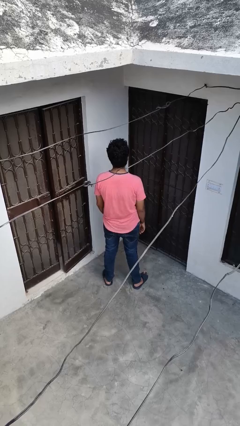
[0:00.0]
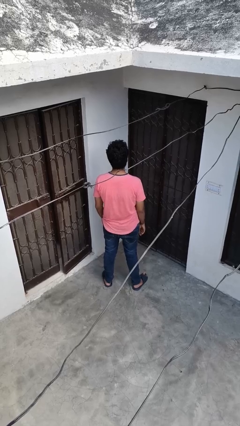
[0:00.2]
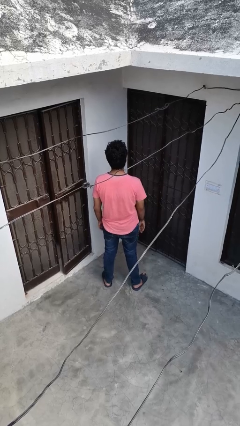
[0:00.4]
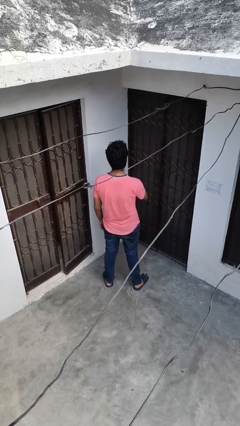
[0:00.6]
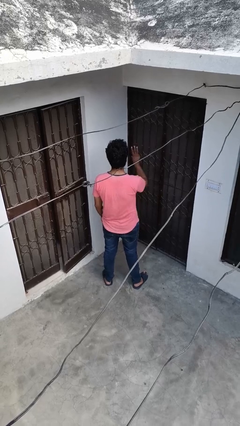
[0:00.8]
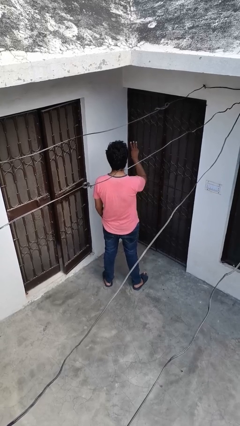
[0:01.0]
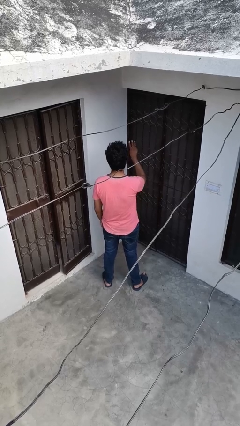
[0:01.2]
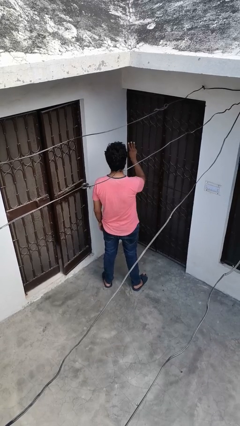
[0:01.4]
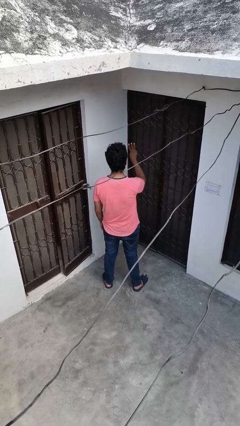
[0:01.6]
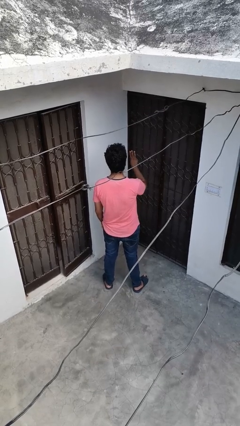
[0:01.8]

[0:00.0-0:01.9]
person gestures number three

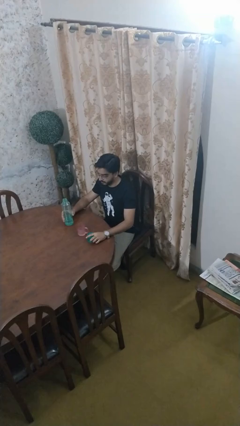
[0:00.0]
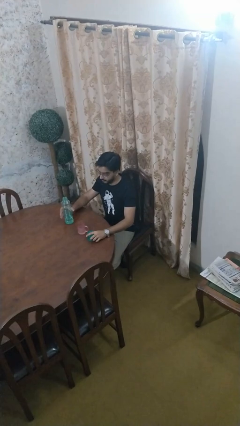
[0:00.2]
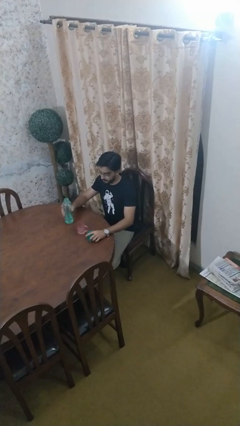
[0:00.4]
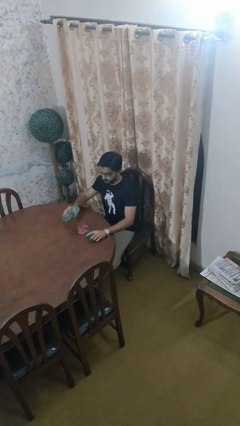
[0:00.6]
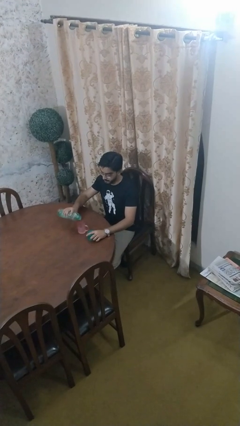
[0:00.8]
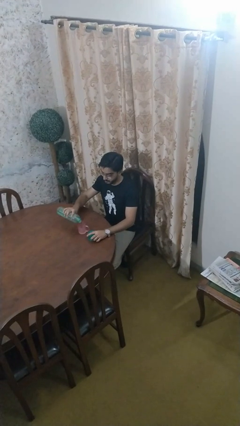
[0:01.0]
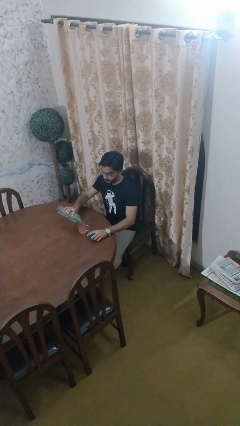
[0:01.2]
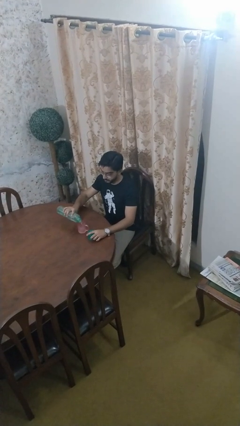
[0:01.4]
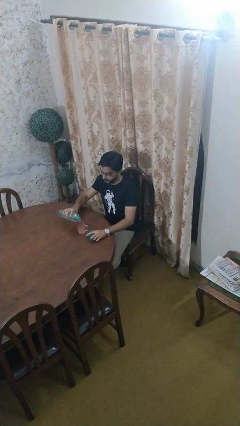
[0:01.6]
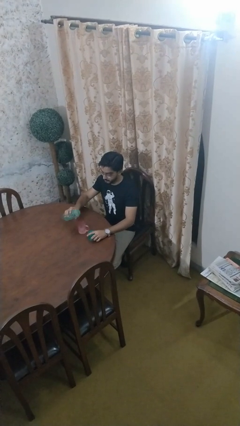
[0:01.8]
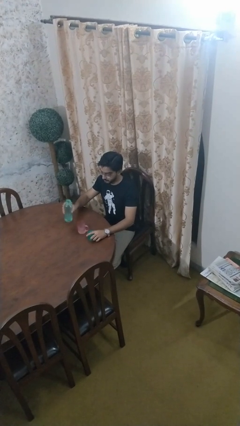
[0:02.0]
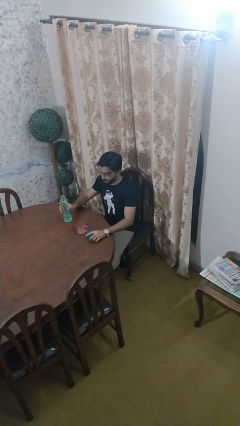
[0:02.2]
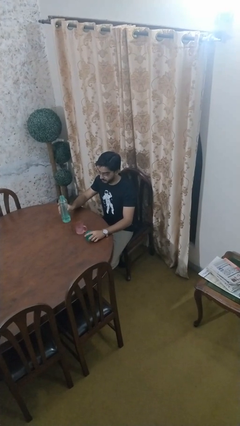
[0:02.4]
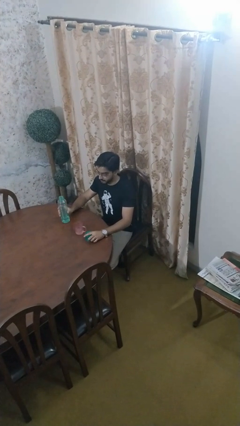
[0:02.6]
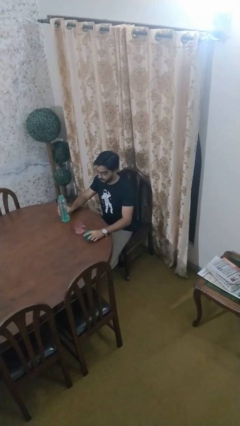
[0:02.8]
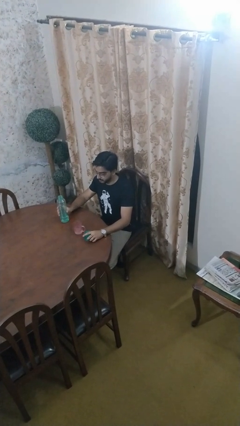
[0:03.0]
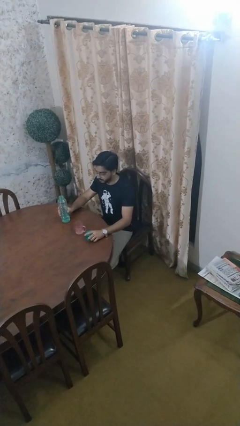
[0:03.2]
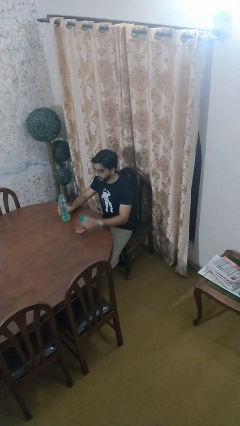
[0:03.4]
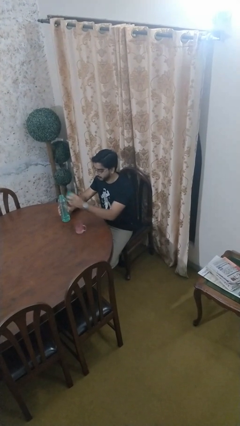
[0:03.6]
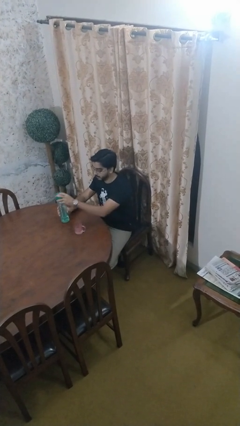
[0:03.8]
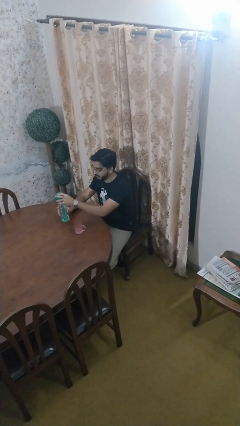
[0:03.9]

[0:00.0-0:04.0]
person pours liquid into cup

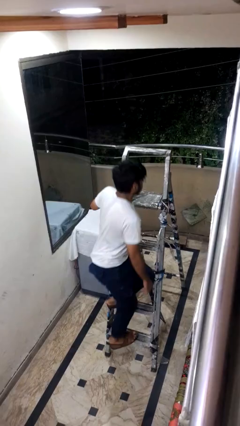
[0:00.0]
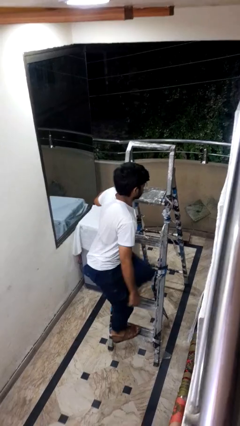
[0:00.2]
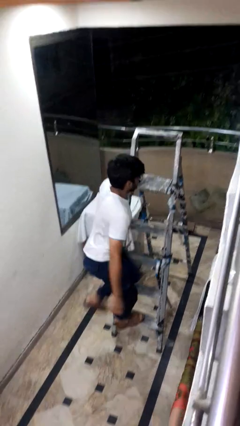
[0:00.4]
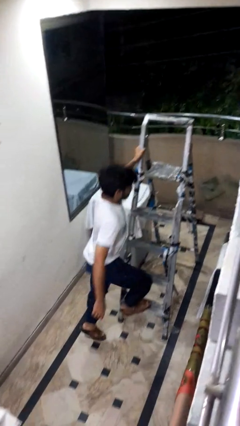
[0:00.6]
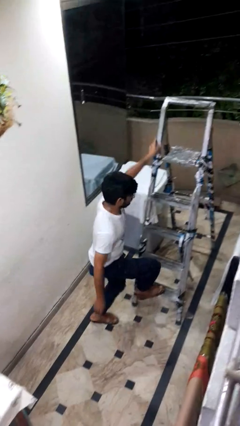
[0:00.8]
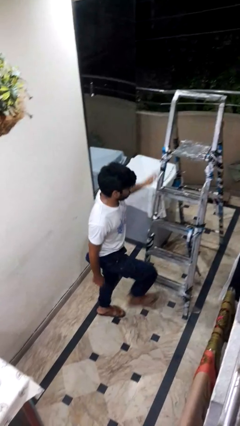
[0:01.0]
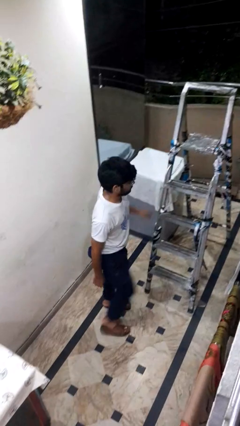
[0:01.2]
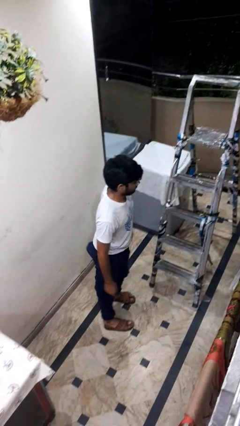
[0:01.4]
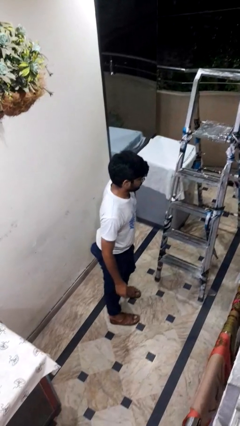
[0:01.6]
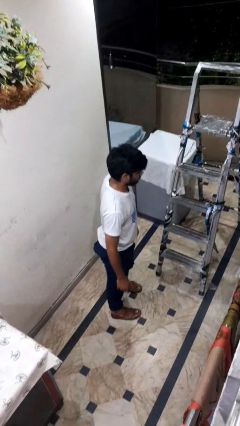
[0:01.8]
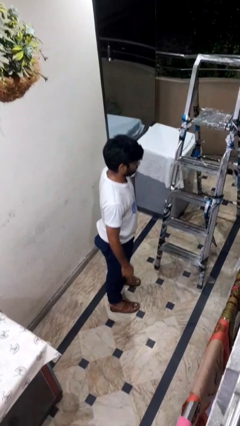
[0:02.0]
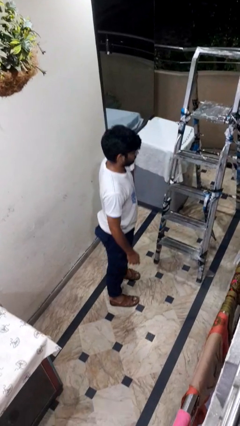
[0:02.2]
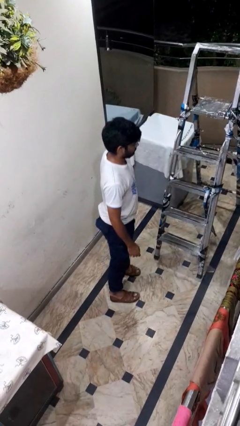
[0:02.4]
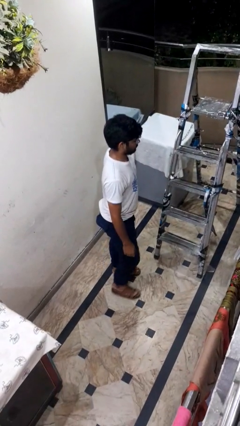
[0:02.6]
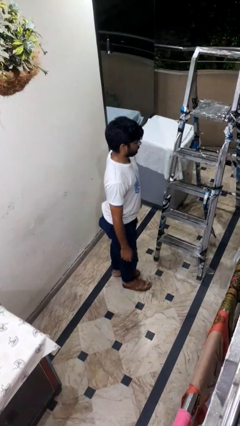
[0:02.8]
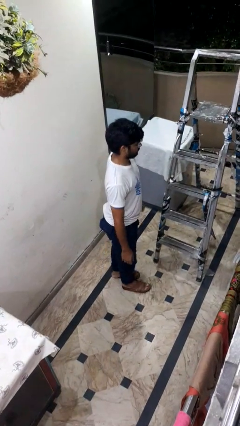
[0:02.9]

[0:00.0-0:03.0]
person climbs down ladder

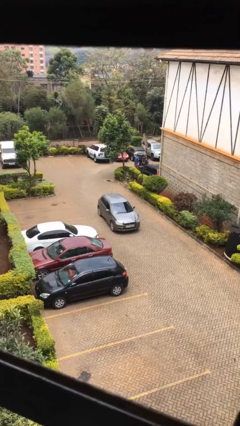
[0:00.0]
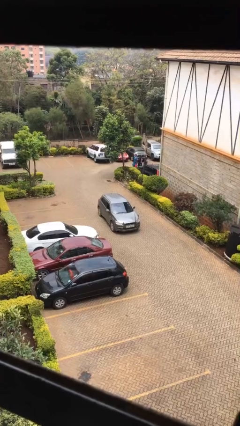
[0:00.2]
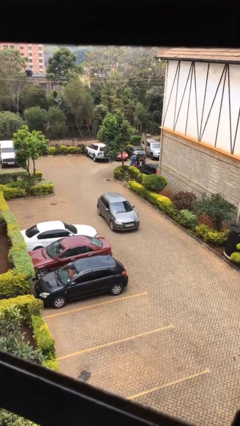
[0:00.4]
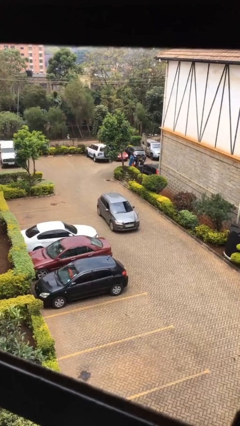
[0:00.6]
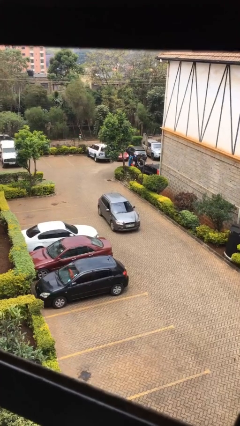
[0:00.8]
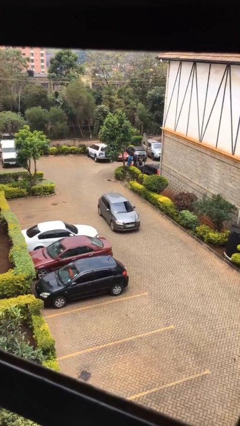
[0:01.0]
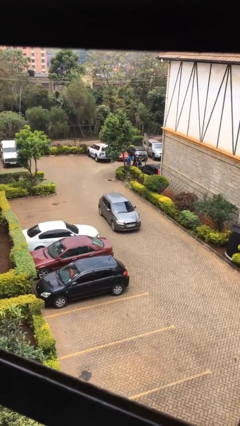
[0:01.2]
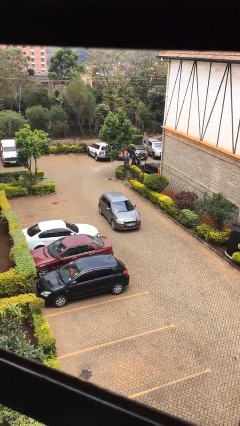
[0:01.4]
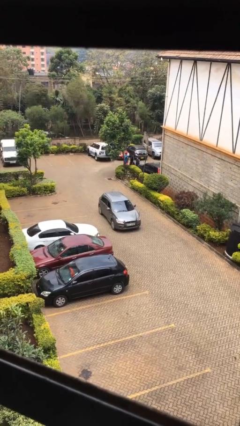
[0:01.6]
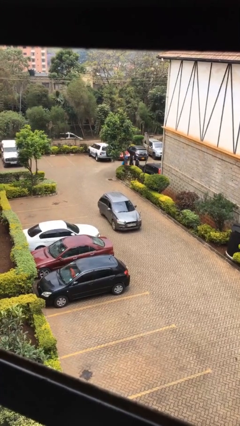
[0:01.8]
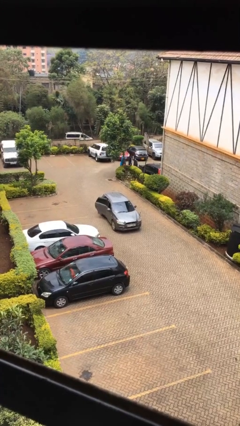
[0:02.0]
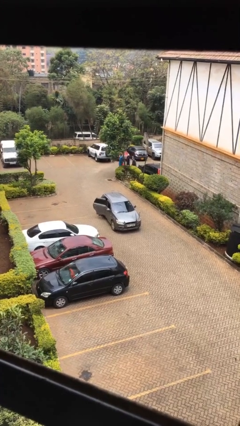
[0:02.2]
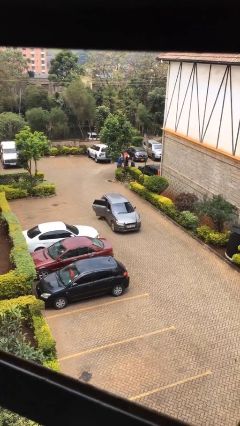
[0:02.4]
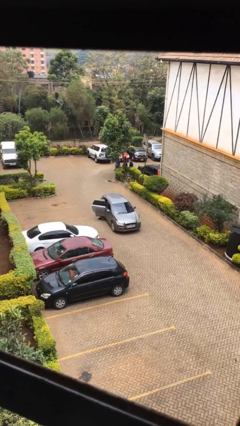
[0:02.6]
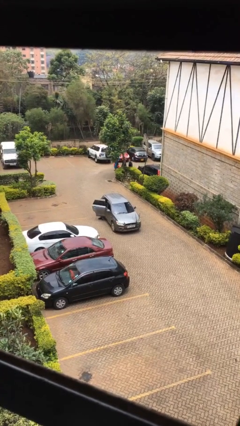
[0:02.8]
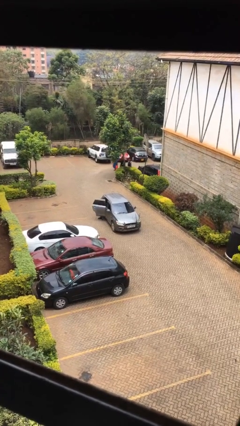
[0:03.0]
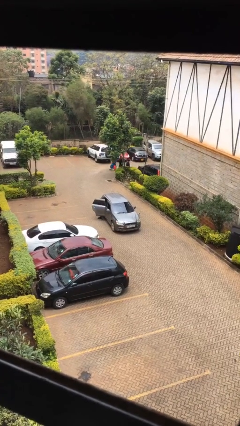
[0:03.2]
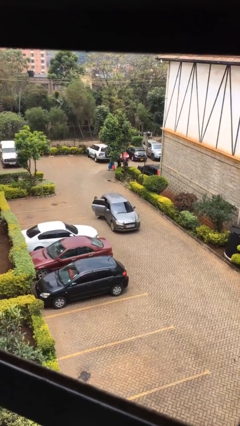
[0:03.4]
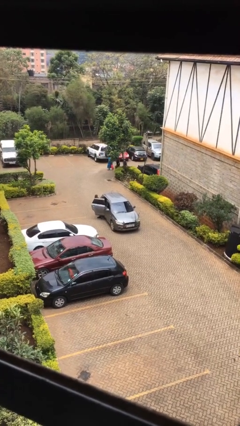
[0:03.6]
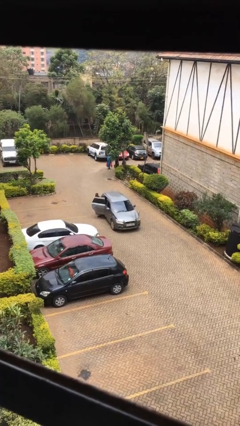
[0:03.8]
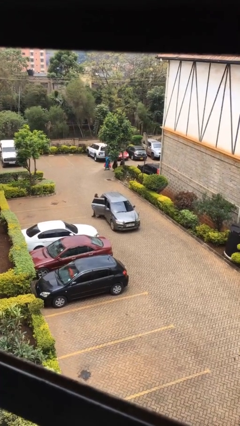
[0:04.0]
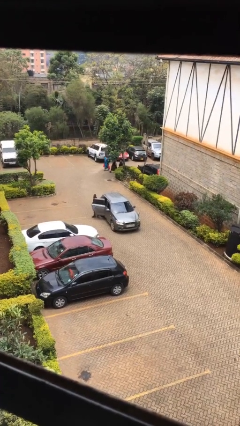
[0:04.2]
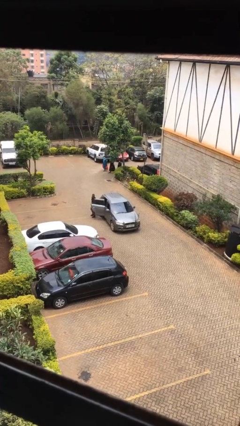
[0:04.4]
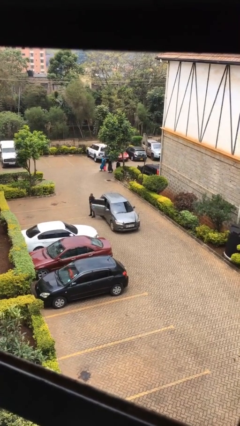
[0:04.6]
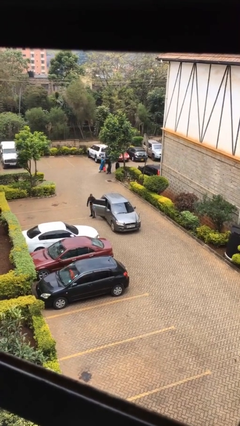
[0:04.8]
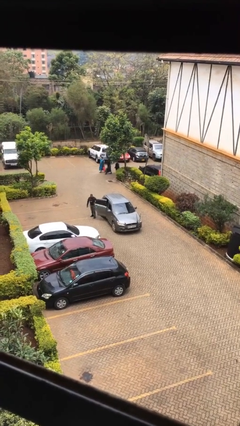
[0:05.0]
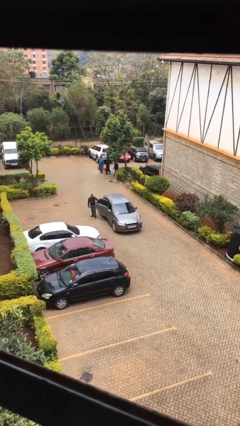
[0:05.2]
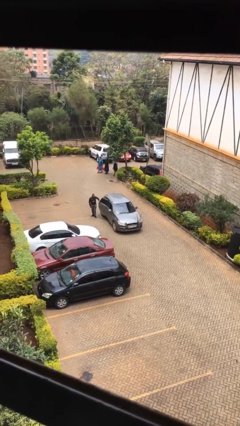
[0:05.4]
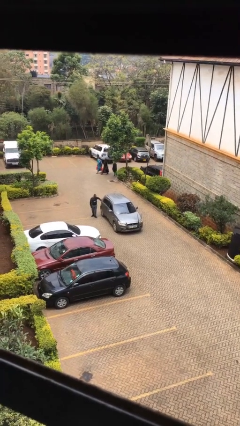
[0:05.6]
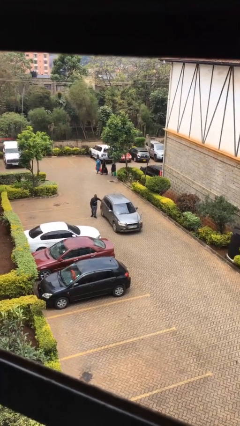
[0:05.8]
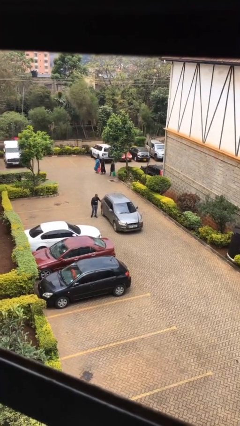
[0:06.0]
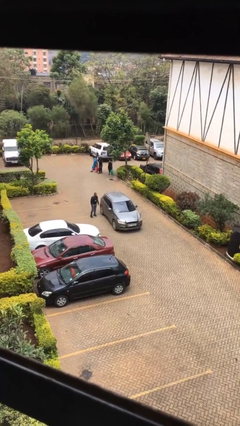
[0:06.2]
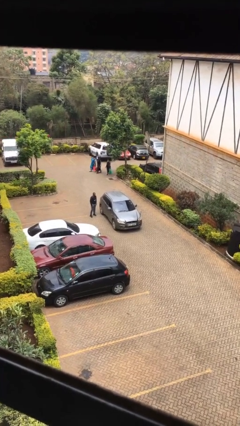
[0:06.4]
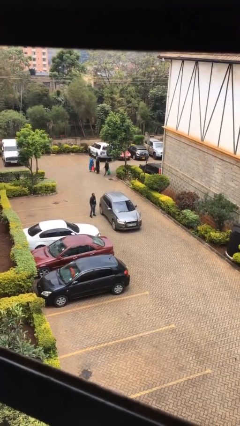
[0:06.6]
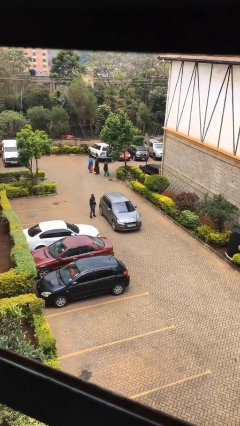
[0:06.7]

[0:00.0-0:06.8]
car drops off person

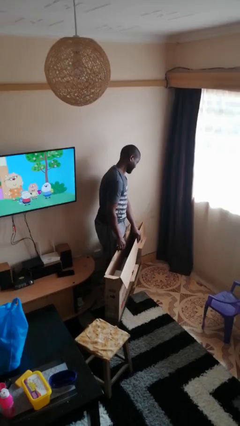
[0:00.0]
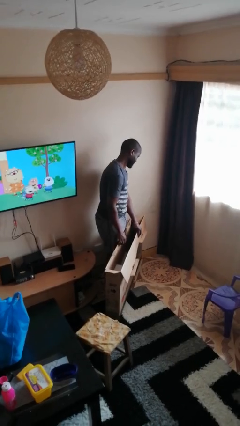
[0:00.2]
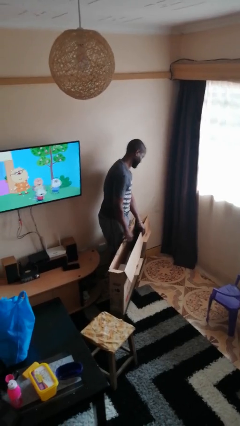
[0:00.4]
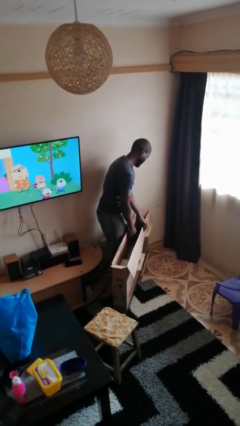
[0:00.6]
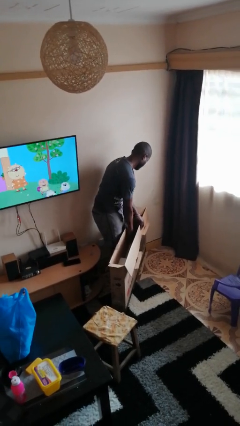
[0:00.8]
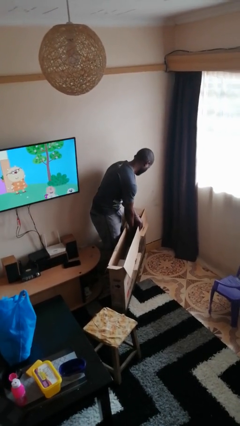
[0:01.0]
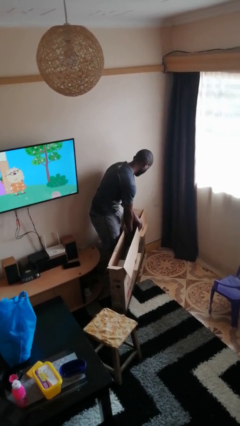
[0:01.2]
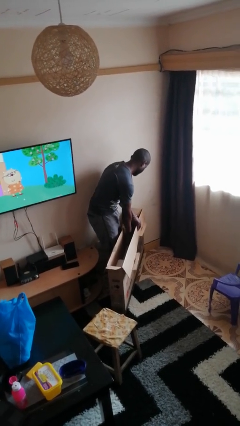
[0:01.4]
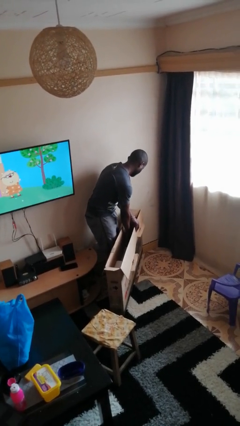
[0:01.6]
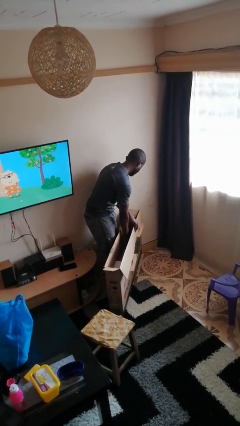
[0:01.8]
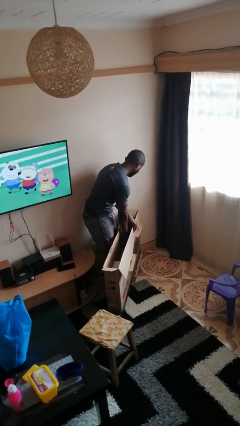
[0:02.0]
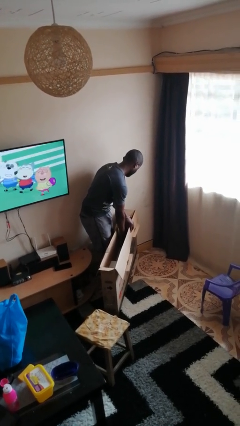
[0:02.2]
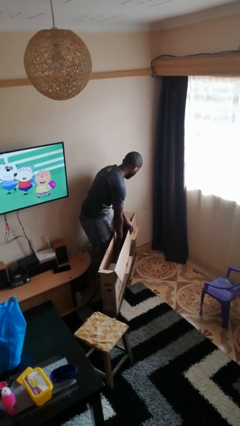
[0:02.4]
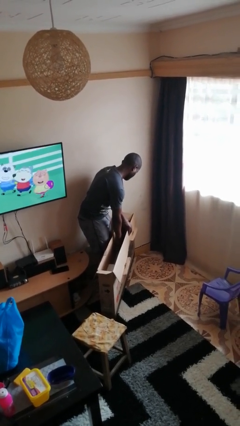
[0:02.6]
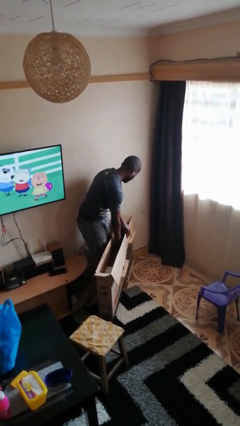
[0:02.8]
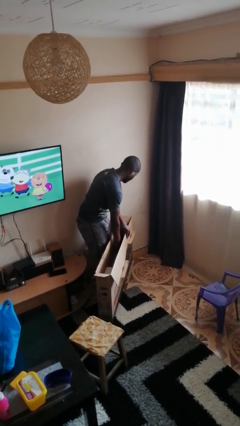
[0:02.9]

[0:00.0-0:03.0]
person searches in box
